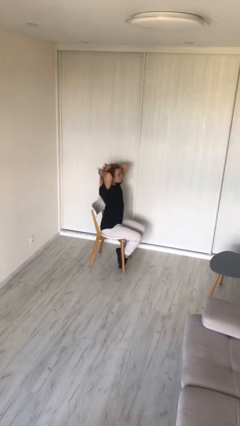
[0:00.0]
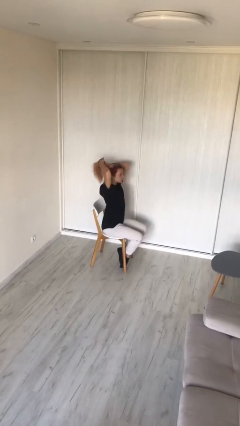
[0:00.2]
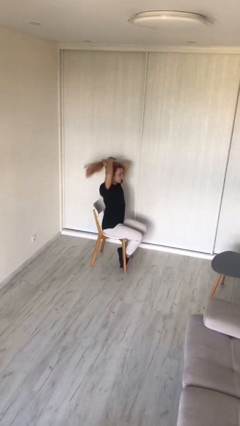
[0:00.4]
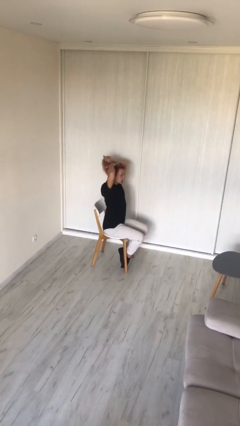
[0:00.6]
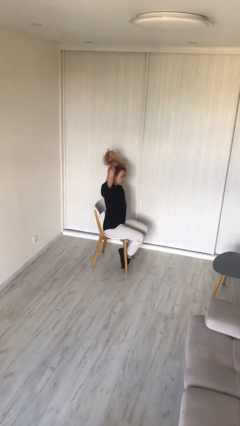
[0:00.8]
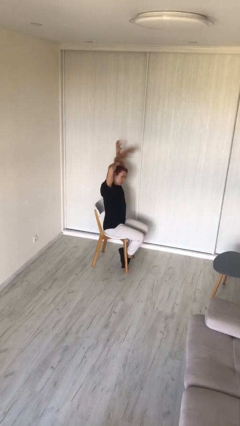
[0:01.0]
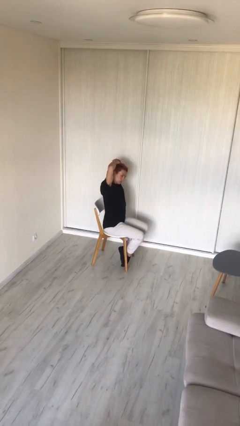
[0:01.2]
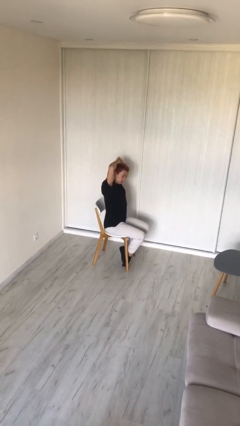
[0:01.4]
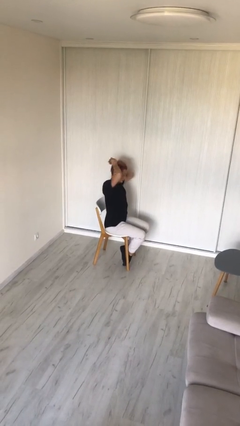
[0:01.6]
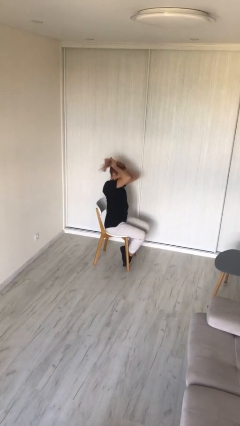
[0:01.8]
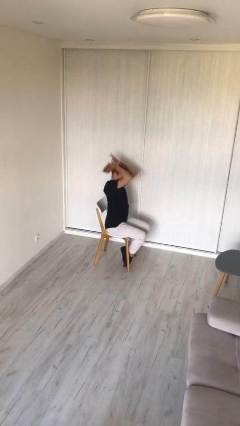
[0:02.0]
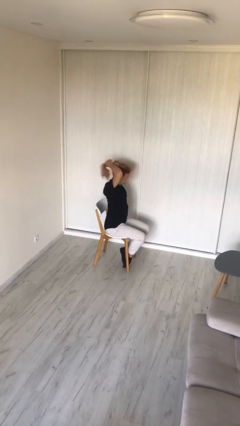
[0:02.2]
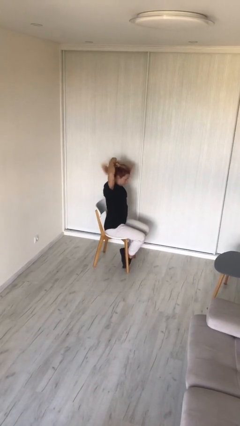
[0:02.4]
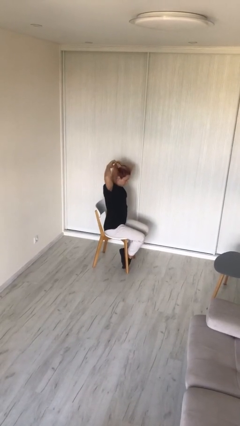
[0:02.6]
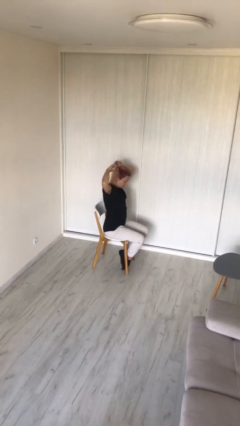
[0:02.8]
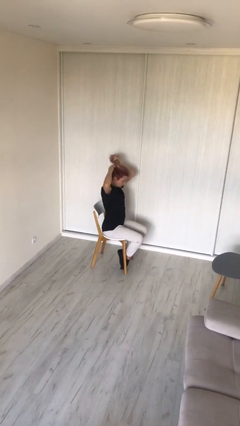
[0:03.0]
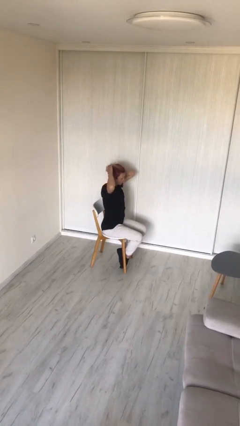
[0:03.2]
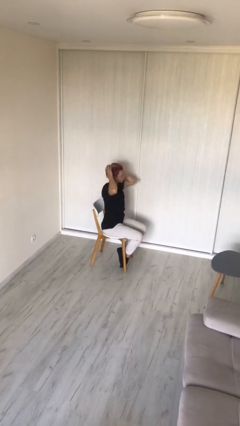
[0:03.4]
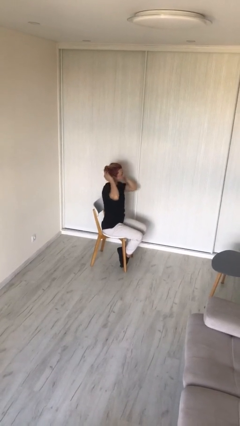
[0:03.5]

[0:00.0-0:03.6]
person puts hair in ponytail

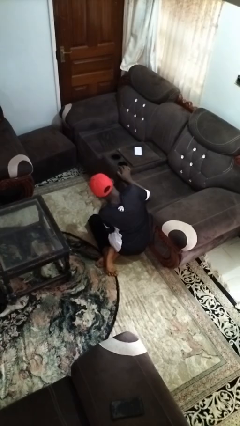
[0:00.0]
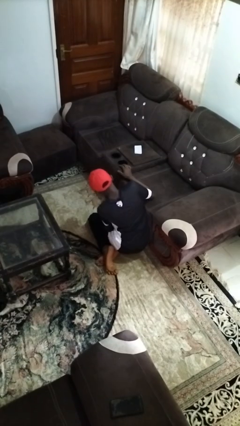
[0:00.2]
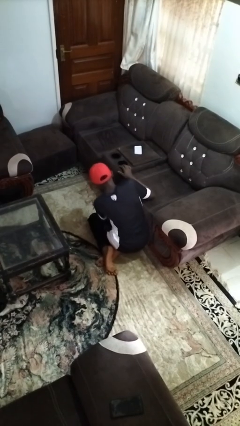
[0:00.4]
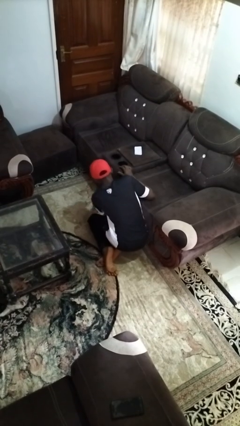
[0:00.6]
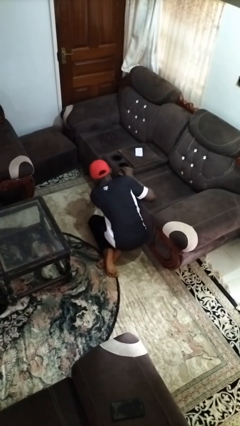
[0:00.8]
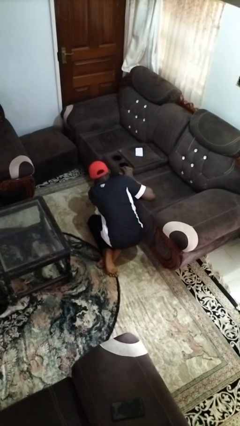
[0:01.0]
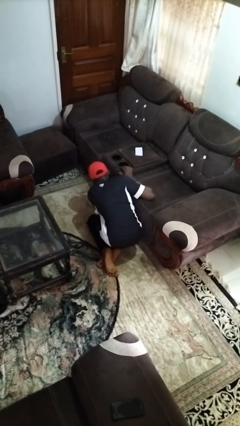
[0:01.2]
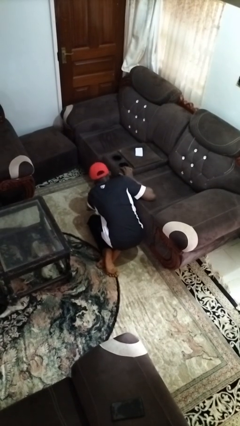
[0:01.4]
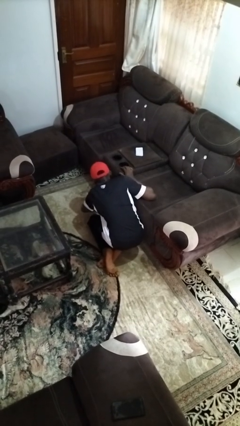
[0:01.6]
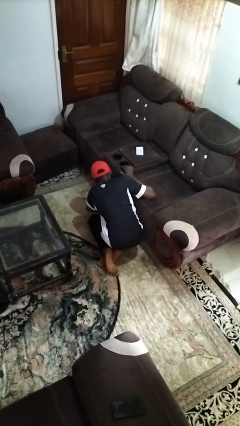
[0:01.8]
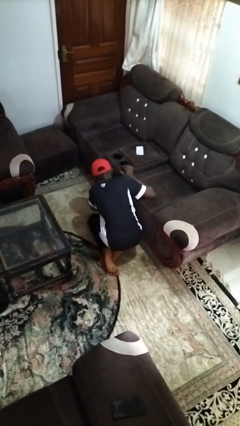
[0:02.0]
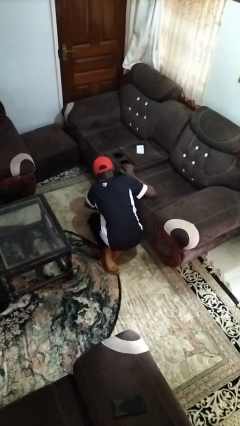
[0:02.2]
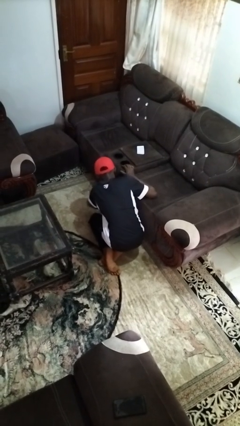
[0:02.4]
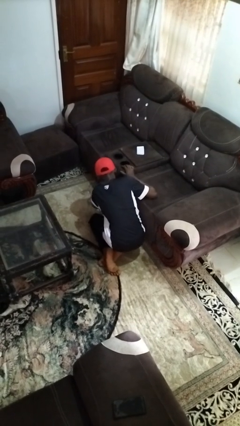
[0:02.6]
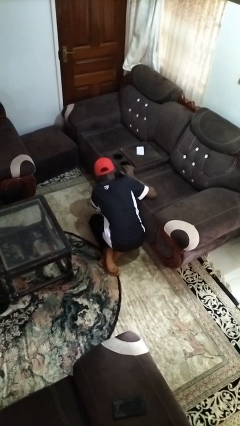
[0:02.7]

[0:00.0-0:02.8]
person searches under couch

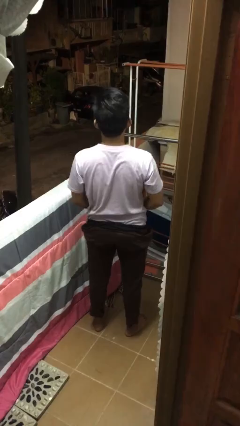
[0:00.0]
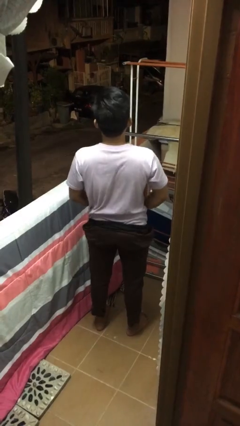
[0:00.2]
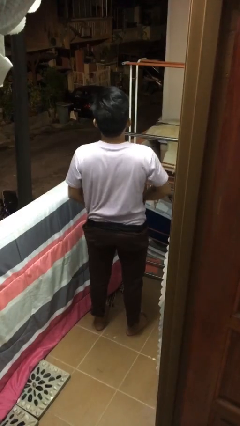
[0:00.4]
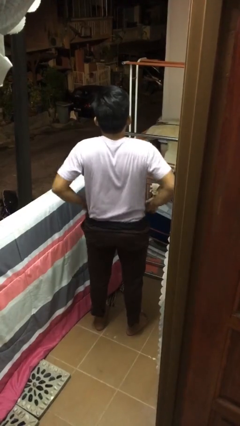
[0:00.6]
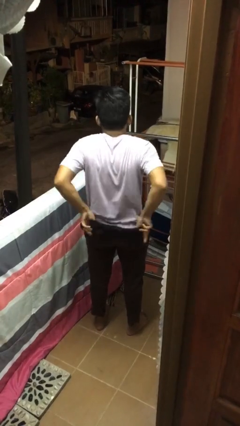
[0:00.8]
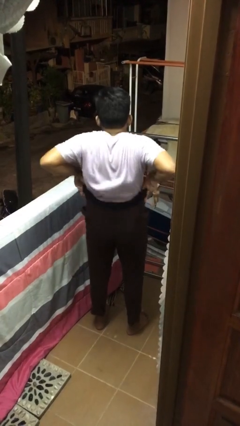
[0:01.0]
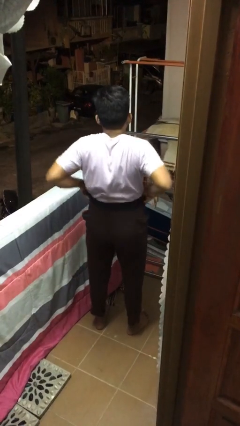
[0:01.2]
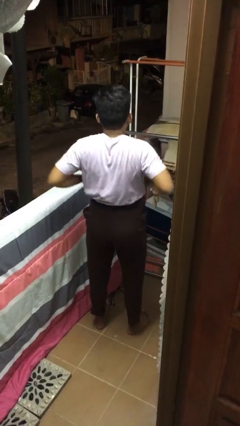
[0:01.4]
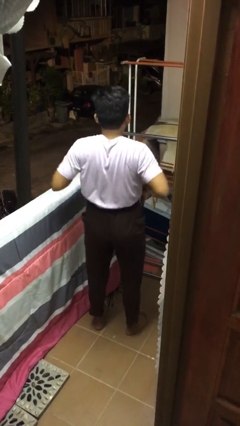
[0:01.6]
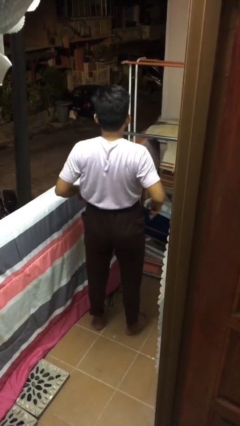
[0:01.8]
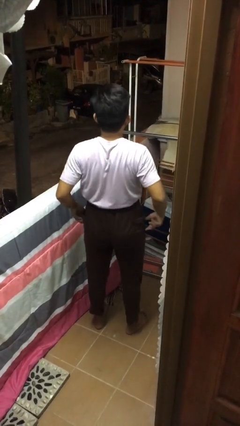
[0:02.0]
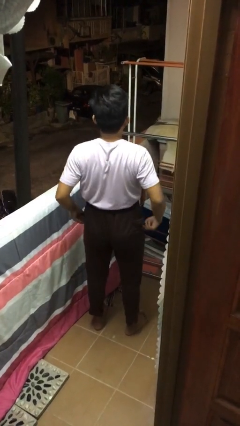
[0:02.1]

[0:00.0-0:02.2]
person hikes up pants

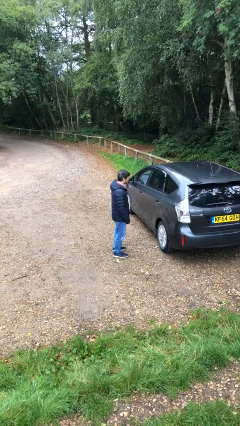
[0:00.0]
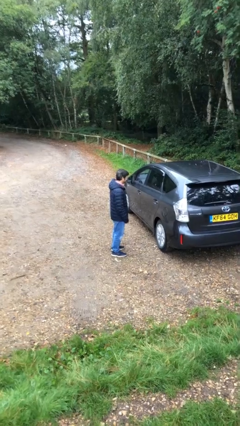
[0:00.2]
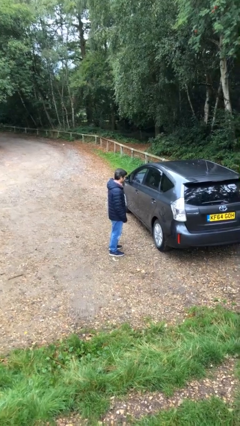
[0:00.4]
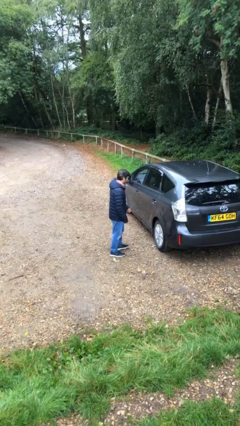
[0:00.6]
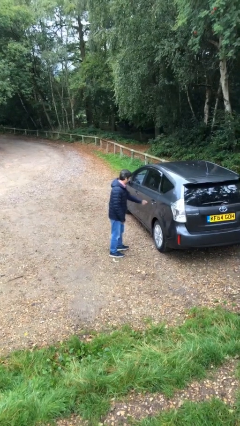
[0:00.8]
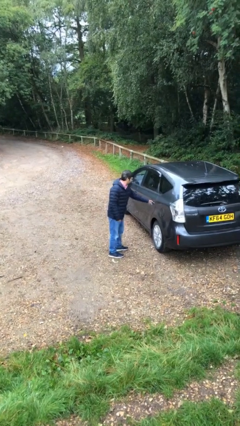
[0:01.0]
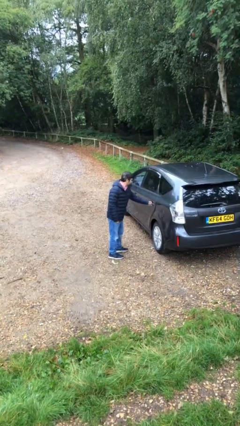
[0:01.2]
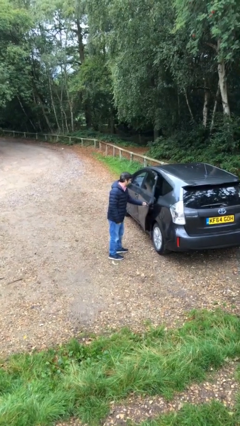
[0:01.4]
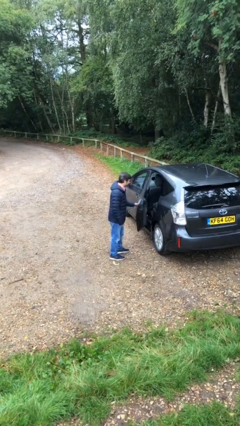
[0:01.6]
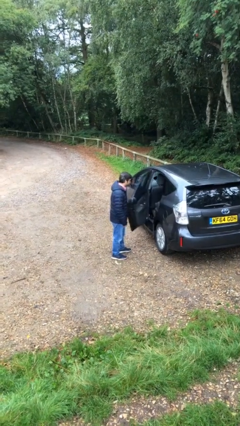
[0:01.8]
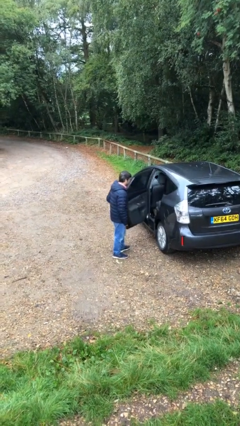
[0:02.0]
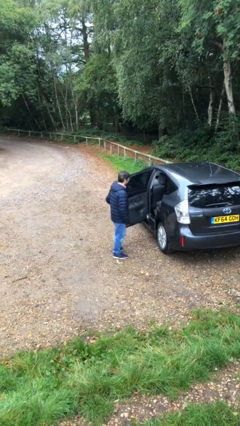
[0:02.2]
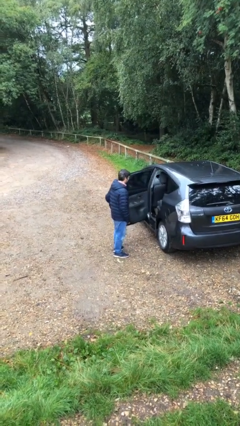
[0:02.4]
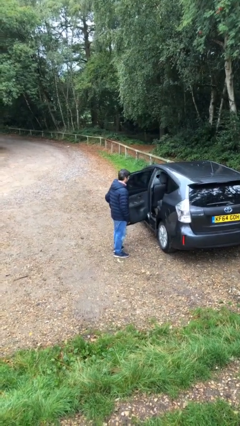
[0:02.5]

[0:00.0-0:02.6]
person opens car door

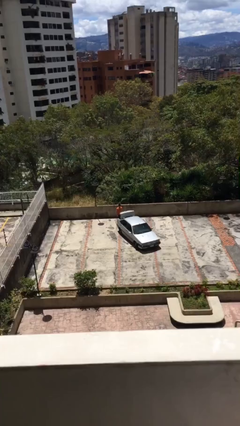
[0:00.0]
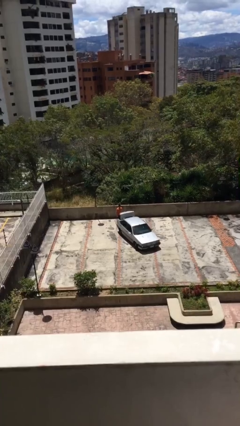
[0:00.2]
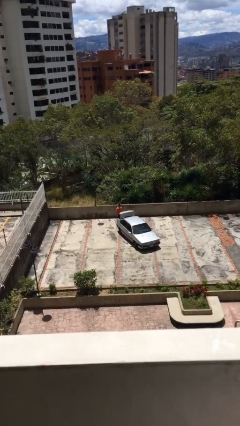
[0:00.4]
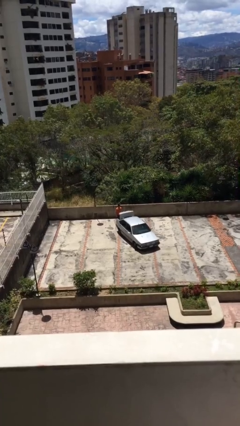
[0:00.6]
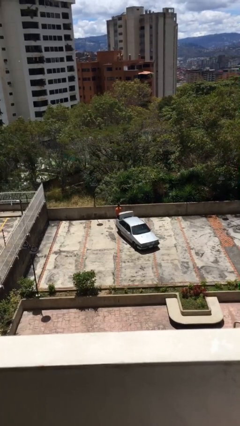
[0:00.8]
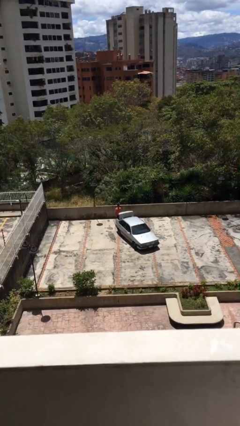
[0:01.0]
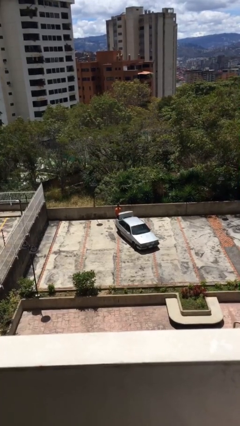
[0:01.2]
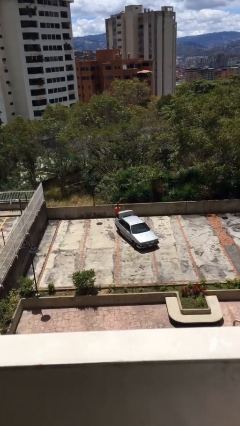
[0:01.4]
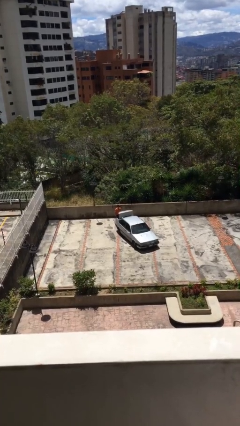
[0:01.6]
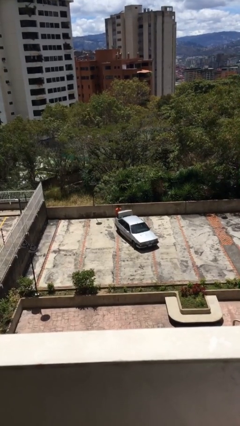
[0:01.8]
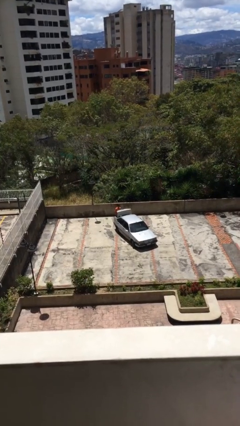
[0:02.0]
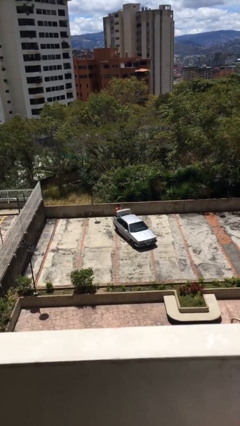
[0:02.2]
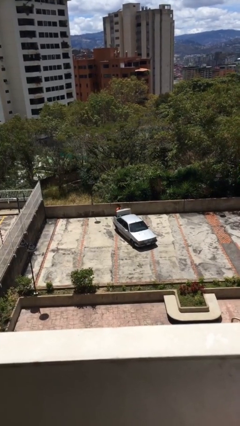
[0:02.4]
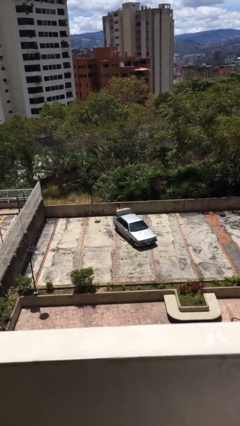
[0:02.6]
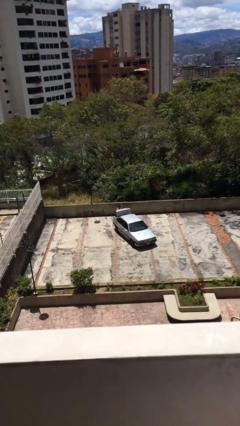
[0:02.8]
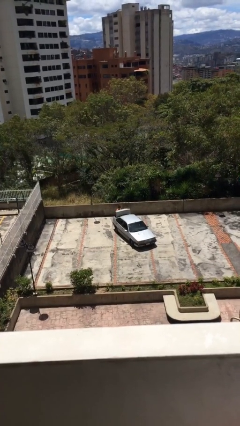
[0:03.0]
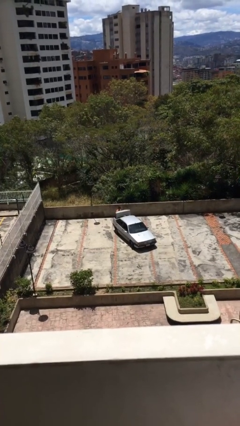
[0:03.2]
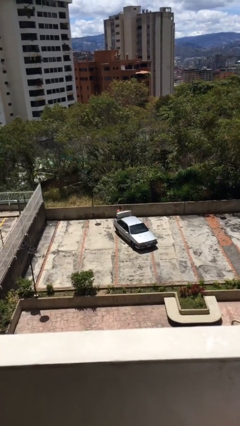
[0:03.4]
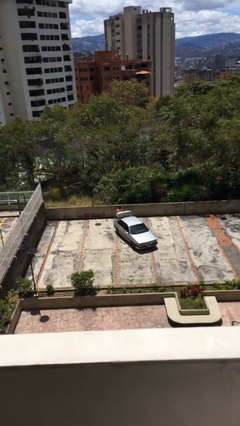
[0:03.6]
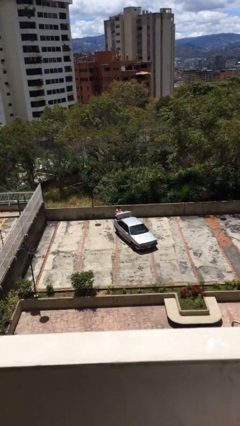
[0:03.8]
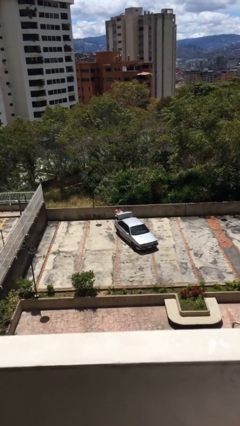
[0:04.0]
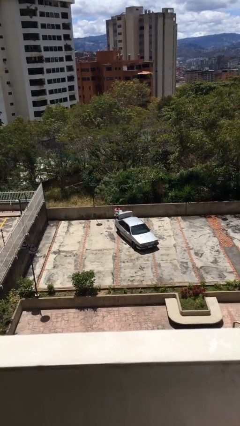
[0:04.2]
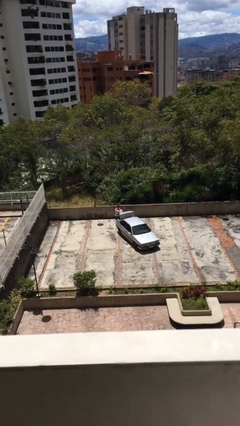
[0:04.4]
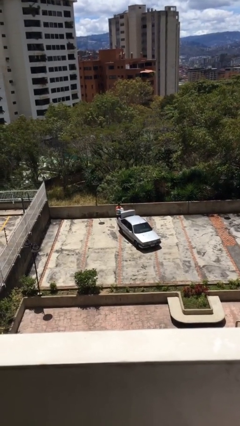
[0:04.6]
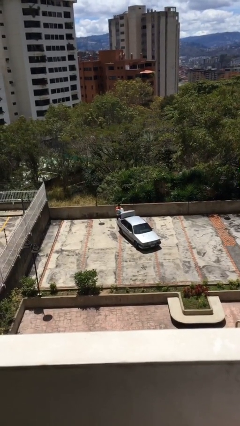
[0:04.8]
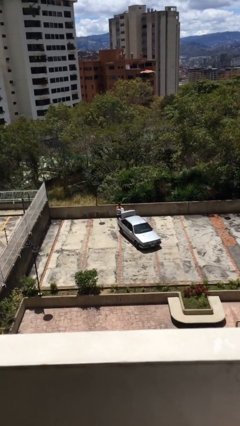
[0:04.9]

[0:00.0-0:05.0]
person unloads car

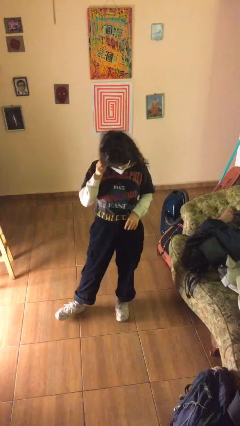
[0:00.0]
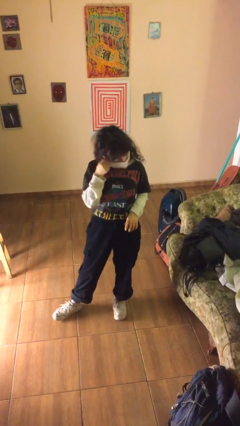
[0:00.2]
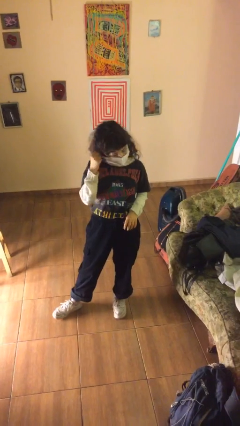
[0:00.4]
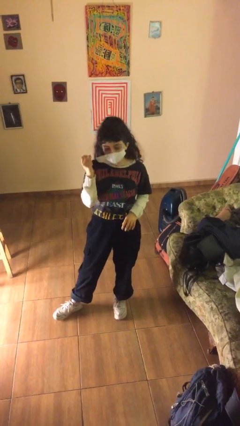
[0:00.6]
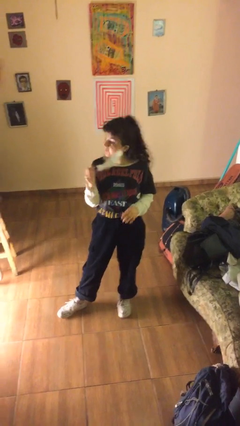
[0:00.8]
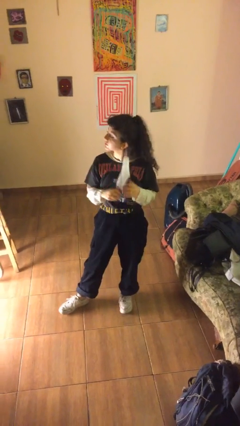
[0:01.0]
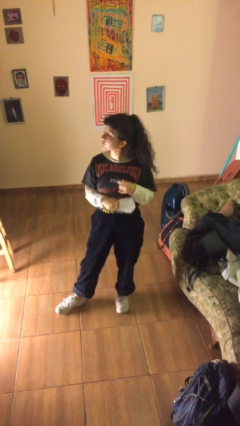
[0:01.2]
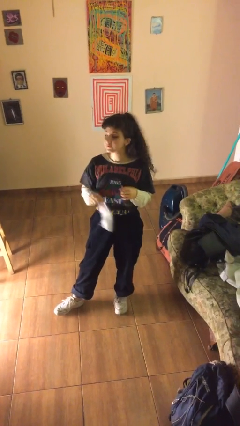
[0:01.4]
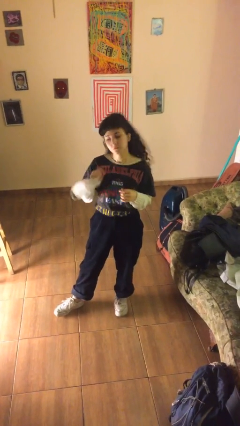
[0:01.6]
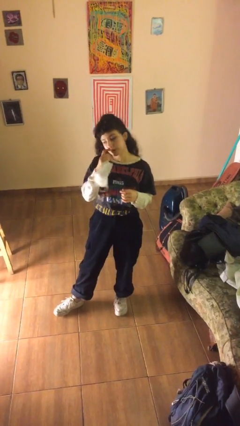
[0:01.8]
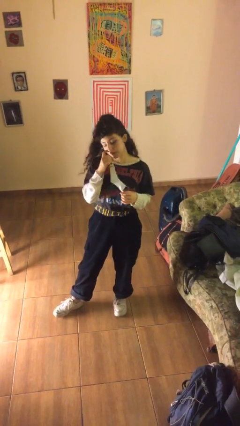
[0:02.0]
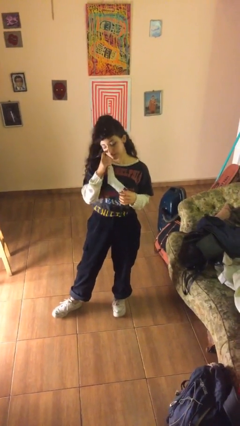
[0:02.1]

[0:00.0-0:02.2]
person takes off facemask
